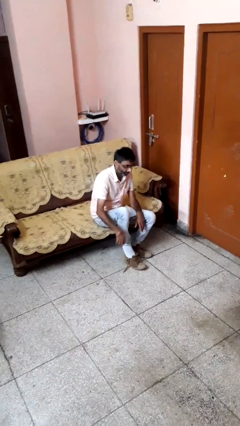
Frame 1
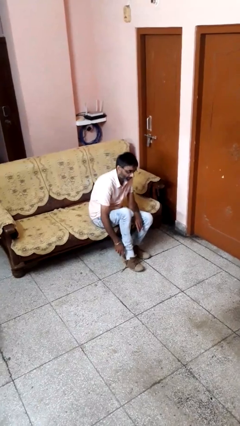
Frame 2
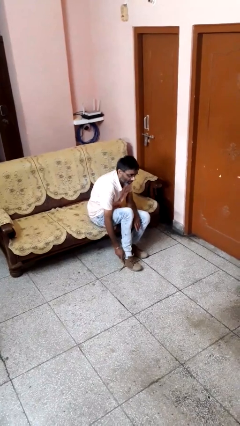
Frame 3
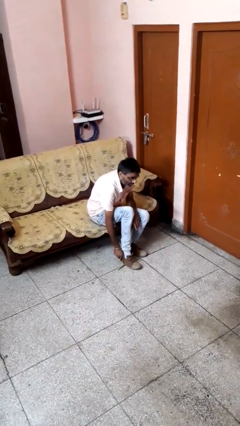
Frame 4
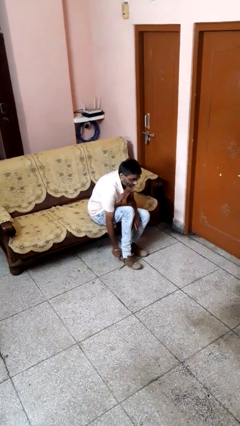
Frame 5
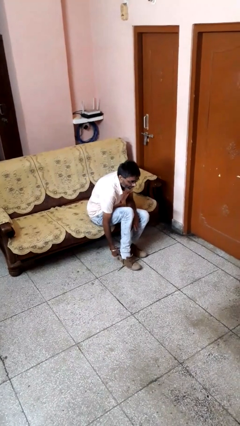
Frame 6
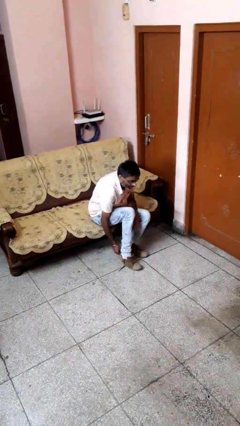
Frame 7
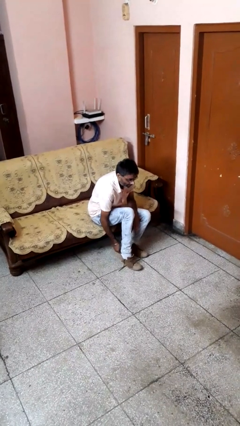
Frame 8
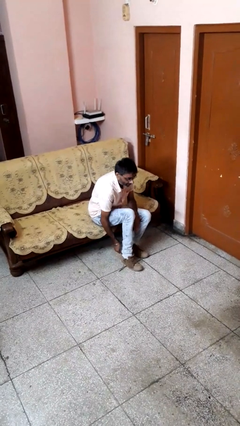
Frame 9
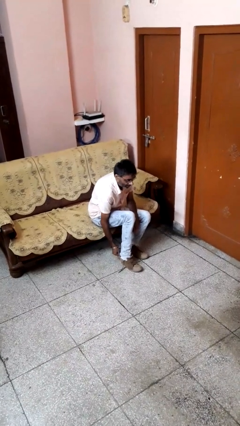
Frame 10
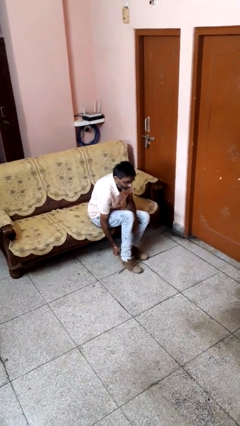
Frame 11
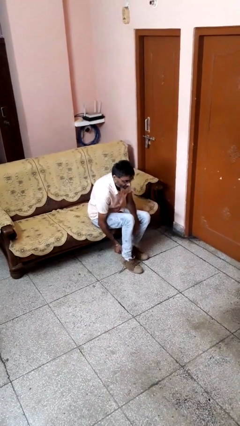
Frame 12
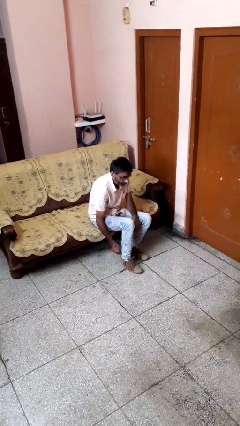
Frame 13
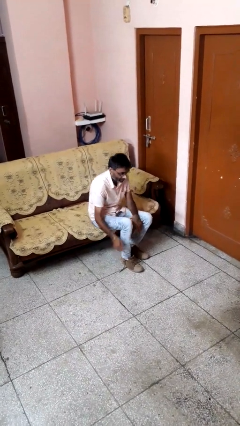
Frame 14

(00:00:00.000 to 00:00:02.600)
person puts on shoes

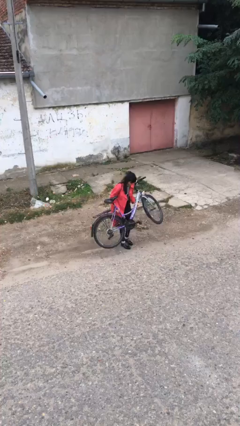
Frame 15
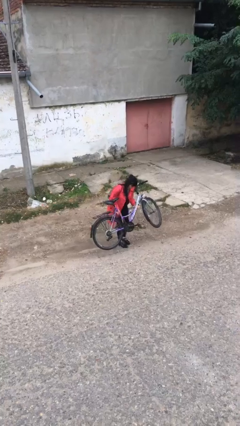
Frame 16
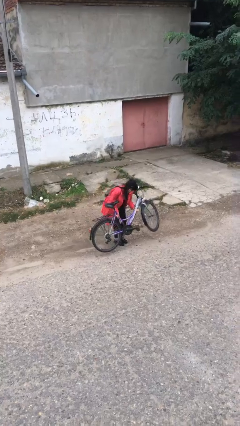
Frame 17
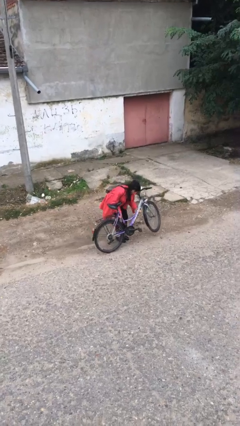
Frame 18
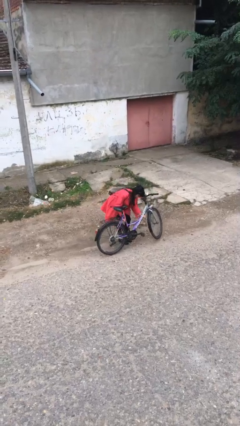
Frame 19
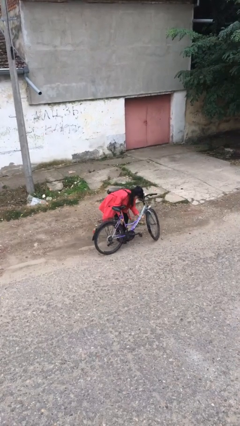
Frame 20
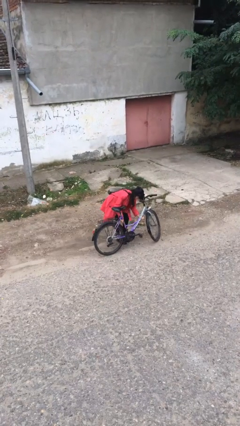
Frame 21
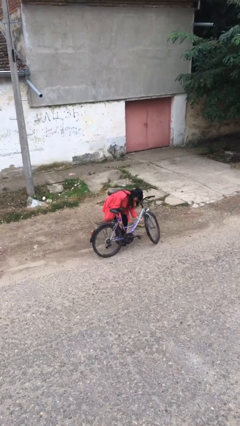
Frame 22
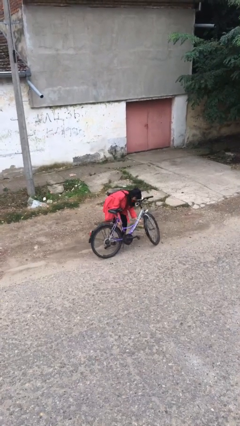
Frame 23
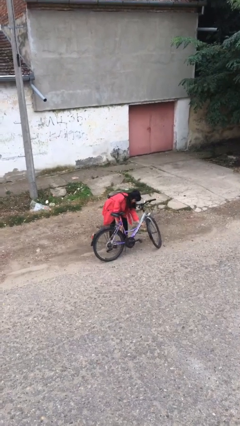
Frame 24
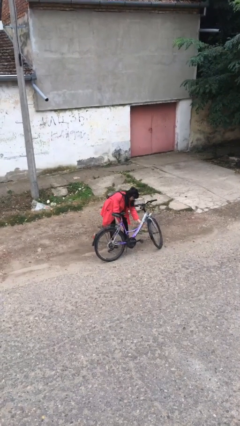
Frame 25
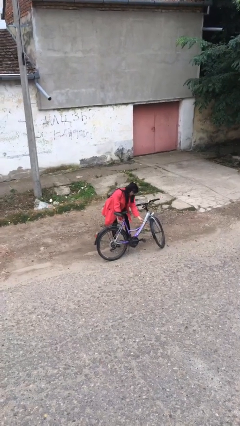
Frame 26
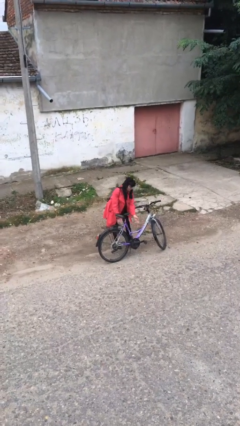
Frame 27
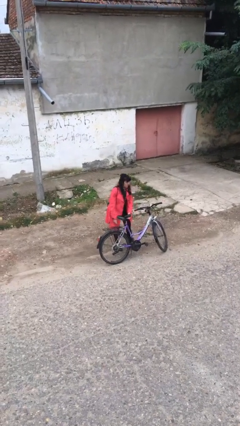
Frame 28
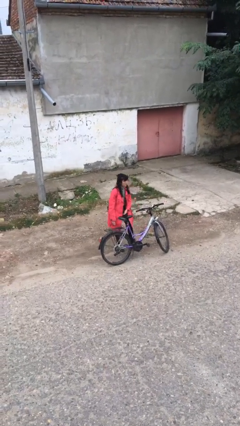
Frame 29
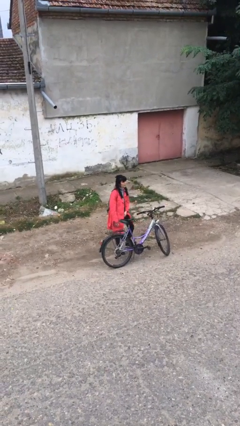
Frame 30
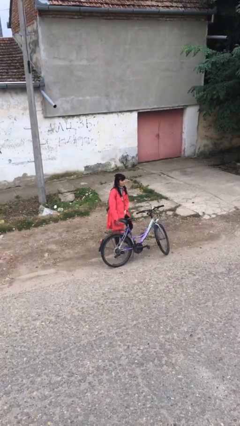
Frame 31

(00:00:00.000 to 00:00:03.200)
person puts down object on floor

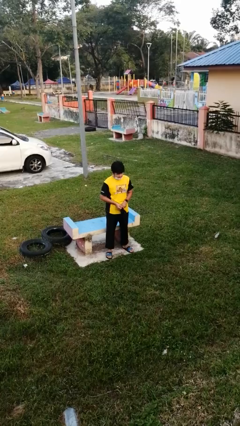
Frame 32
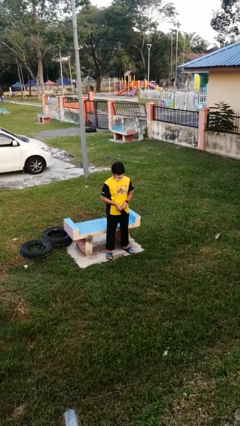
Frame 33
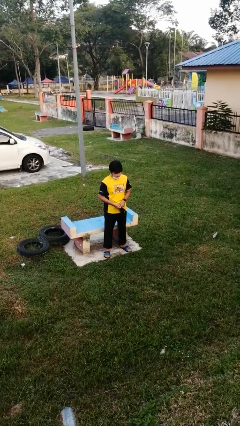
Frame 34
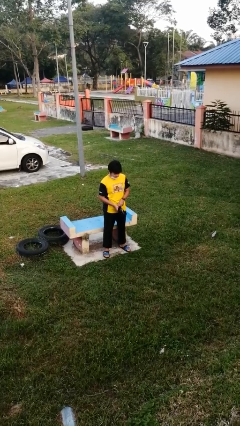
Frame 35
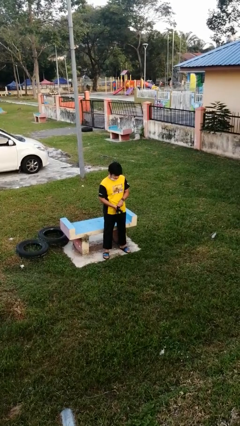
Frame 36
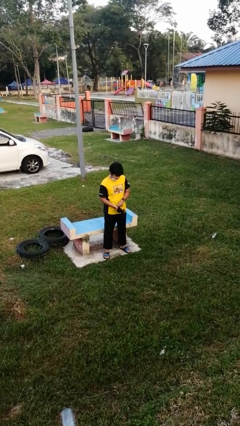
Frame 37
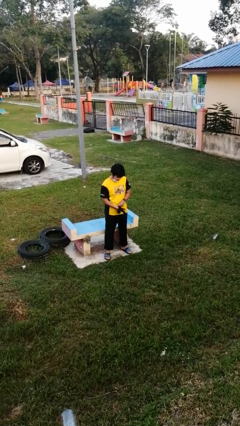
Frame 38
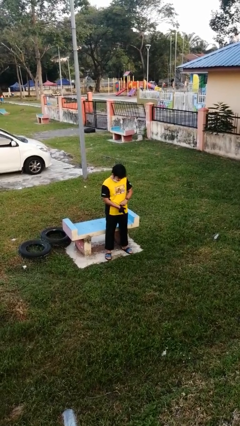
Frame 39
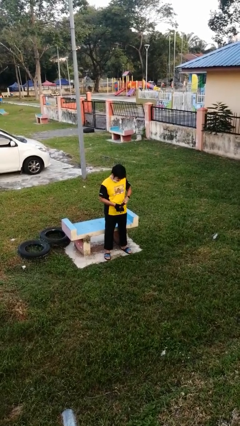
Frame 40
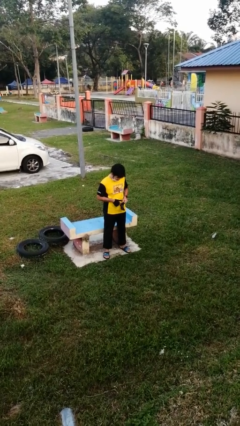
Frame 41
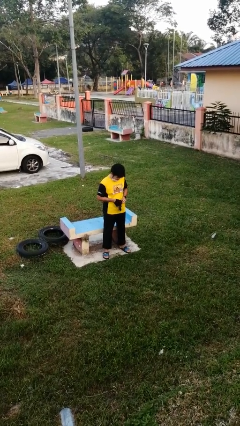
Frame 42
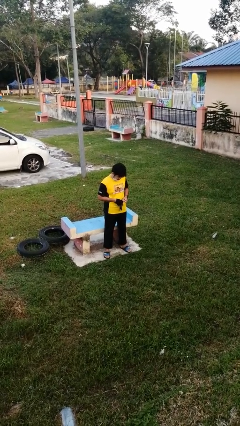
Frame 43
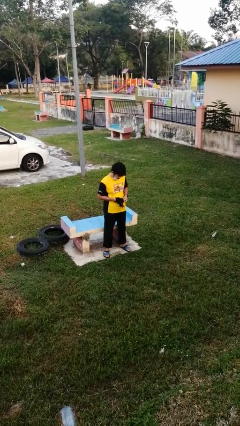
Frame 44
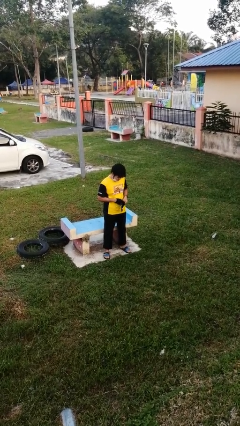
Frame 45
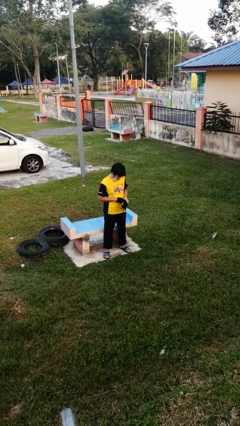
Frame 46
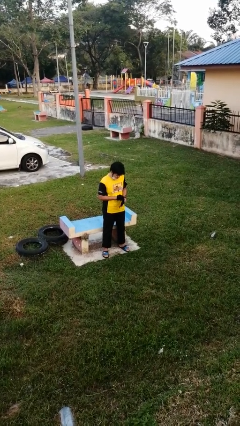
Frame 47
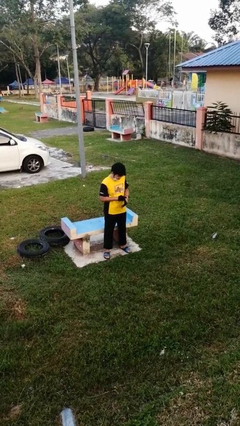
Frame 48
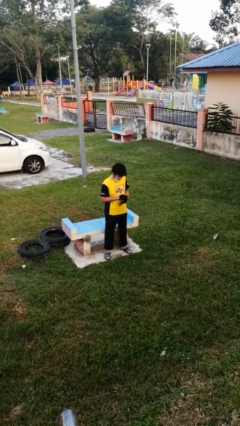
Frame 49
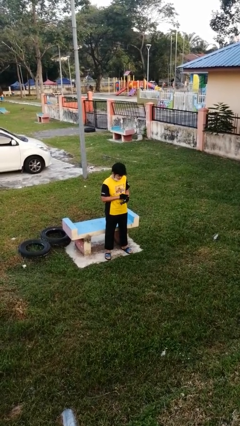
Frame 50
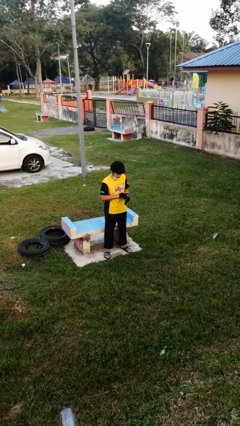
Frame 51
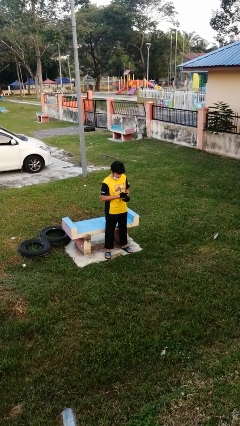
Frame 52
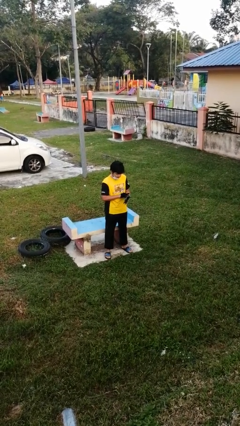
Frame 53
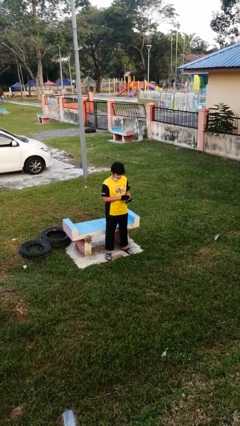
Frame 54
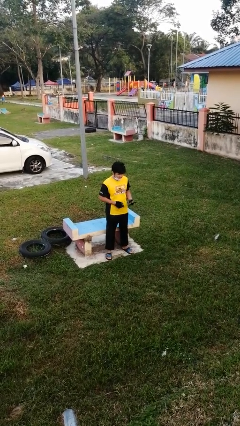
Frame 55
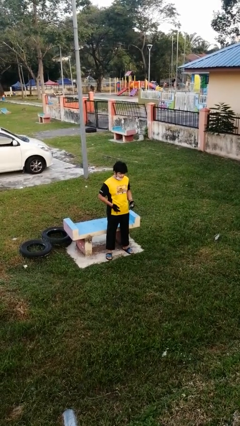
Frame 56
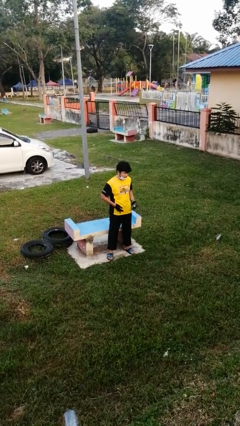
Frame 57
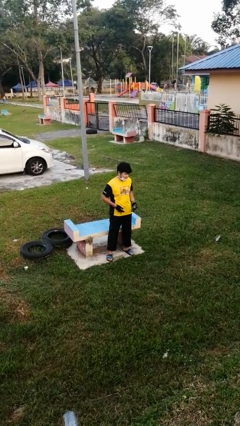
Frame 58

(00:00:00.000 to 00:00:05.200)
person puts on gloves

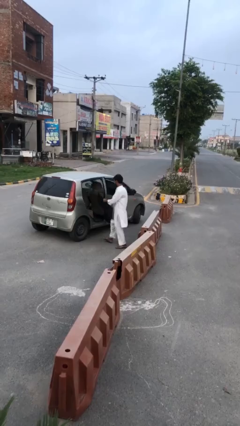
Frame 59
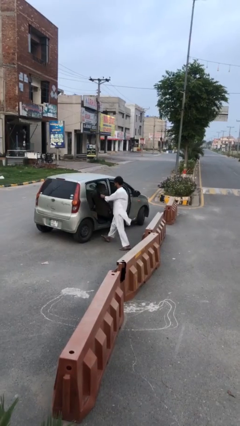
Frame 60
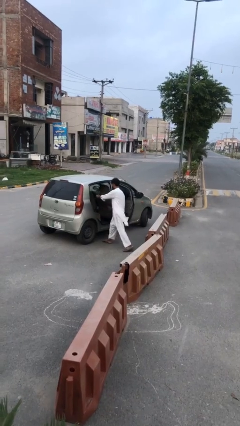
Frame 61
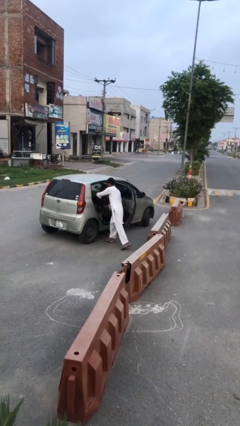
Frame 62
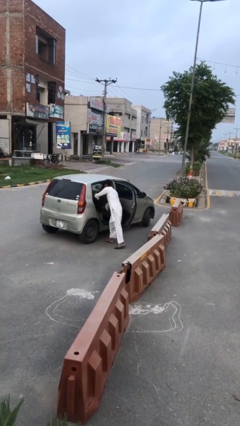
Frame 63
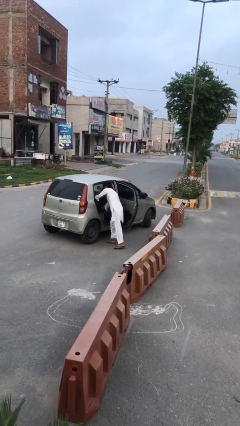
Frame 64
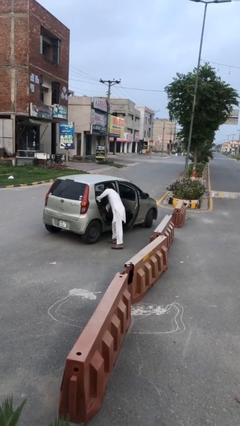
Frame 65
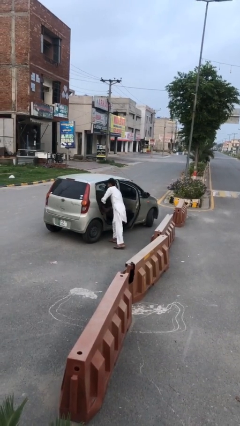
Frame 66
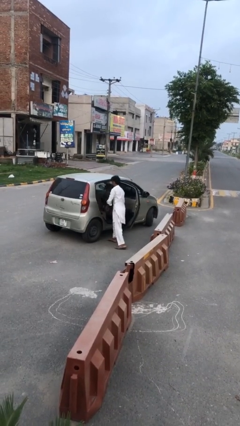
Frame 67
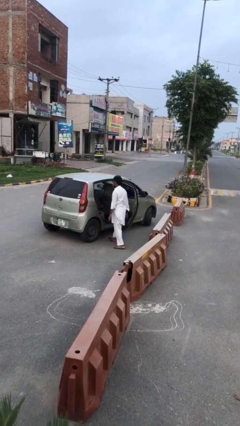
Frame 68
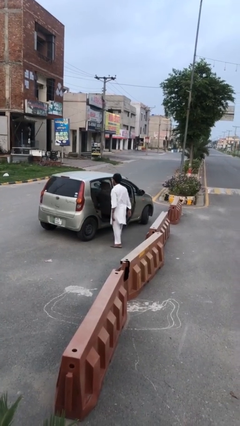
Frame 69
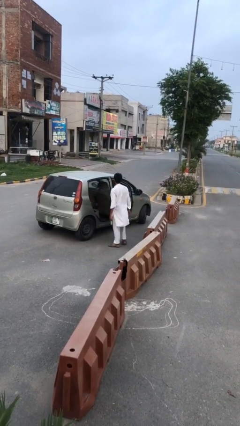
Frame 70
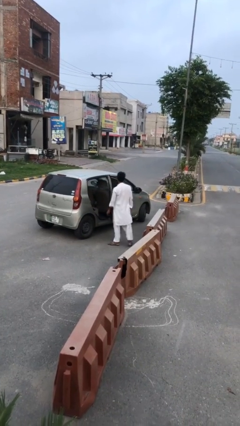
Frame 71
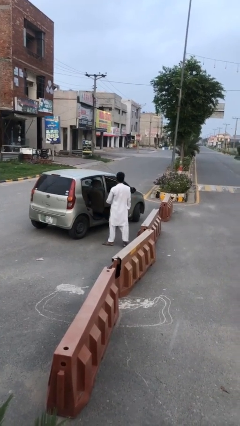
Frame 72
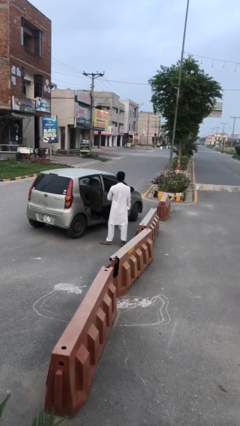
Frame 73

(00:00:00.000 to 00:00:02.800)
person loads car

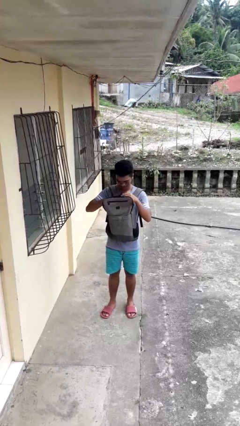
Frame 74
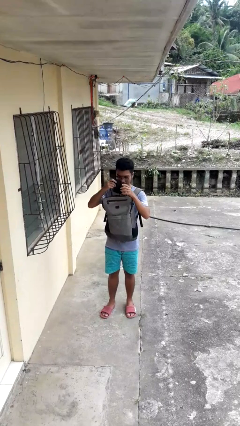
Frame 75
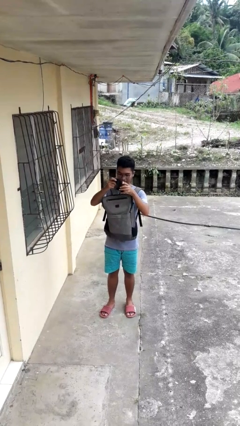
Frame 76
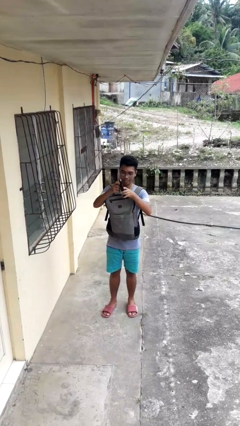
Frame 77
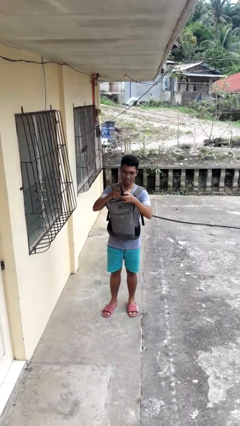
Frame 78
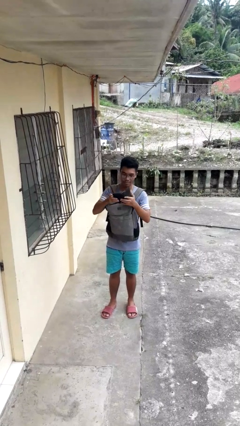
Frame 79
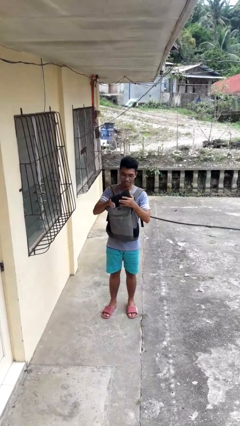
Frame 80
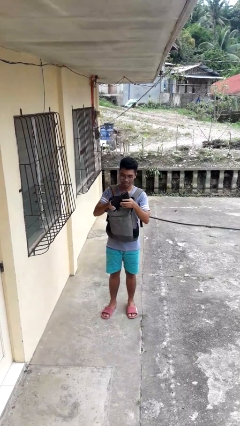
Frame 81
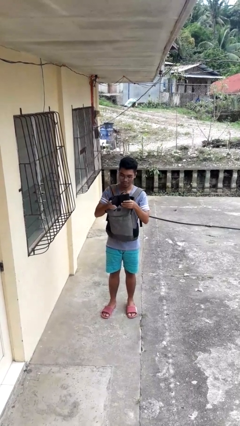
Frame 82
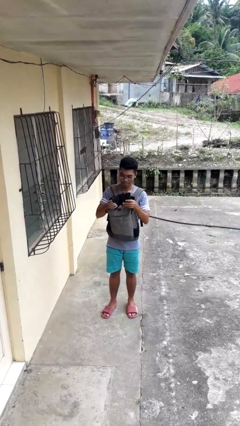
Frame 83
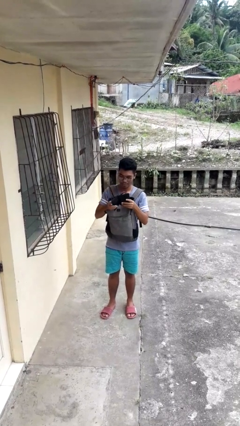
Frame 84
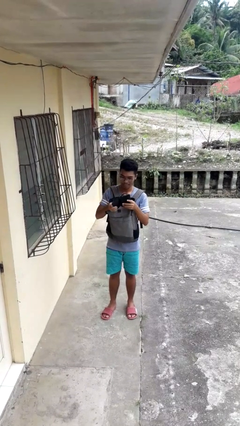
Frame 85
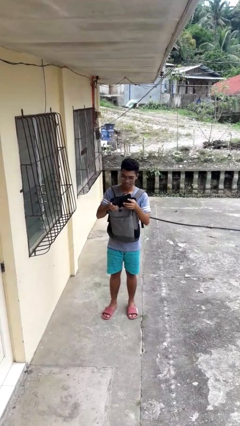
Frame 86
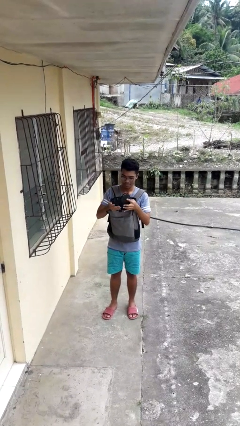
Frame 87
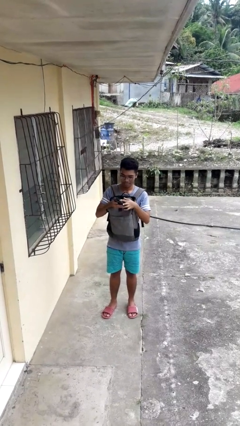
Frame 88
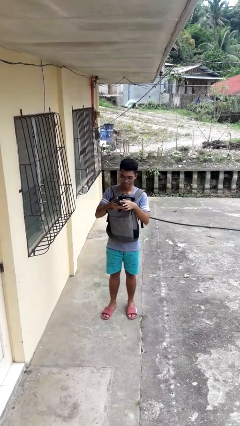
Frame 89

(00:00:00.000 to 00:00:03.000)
person takes object from backpack

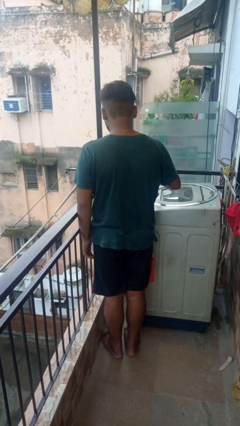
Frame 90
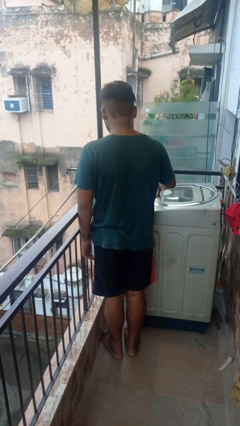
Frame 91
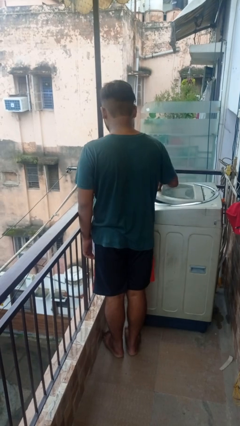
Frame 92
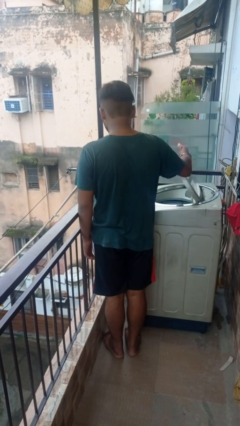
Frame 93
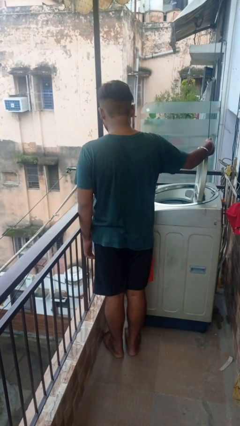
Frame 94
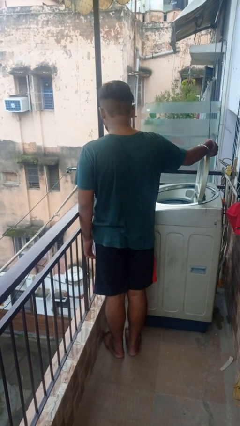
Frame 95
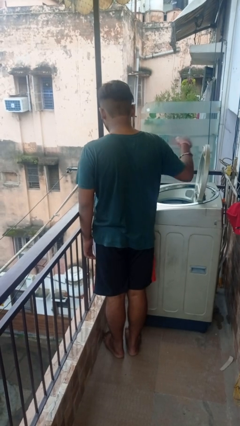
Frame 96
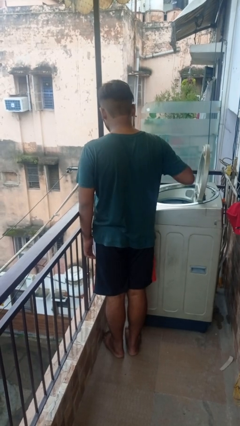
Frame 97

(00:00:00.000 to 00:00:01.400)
person opens clothes washer
